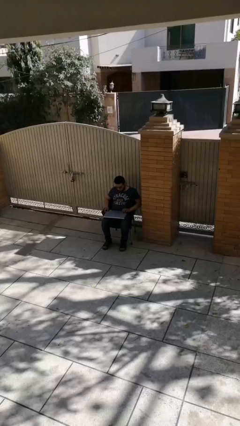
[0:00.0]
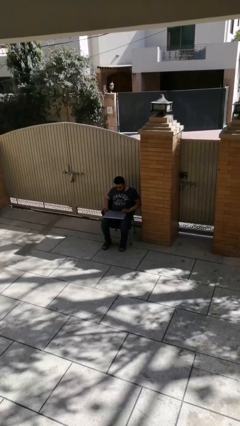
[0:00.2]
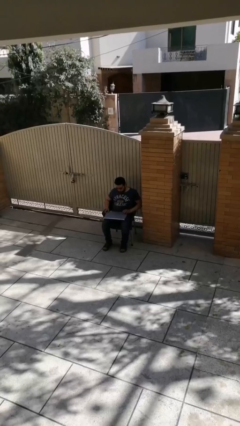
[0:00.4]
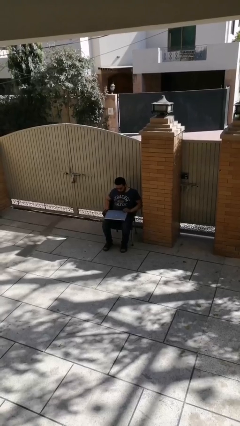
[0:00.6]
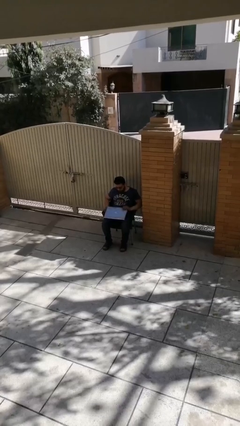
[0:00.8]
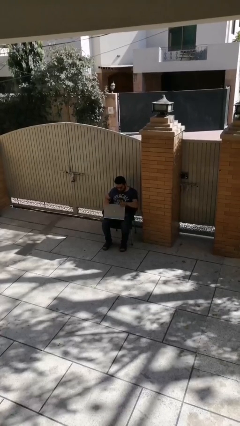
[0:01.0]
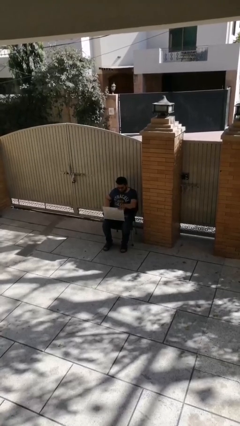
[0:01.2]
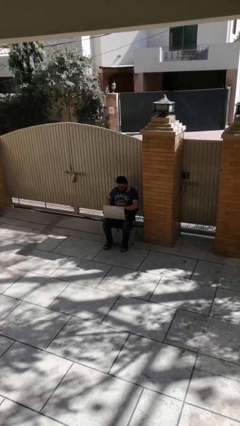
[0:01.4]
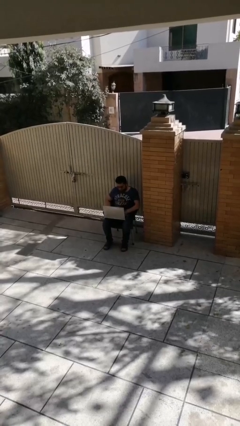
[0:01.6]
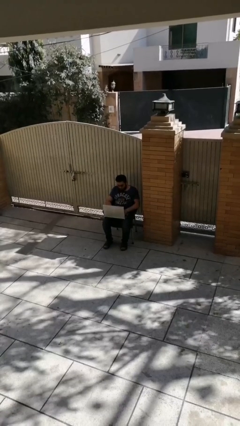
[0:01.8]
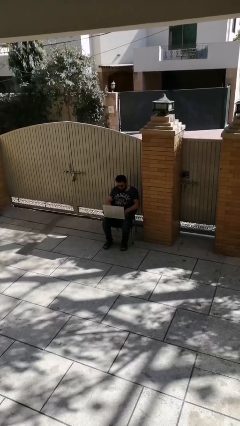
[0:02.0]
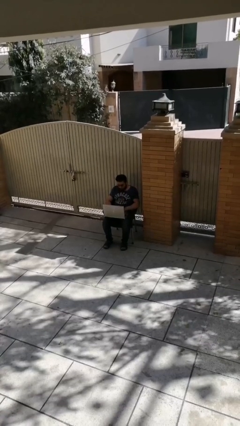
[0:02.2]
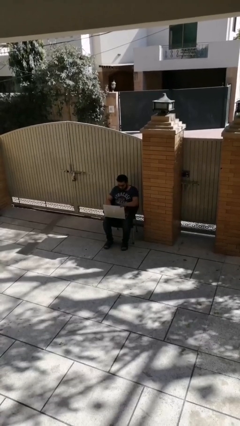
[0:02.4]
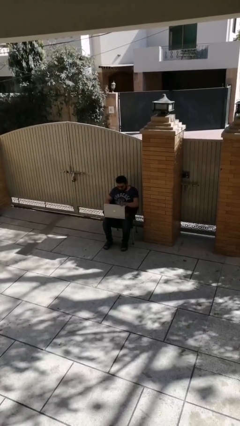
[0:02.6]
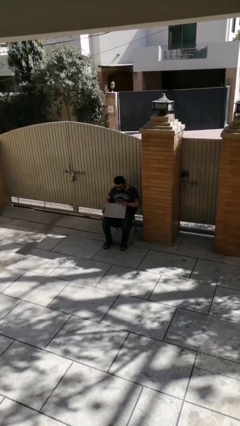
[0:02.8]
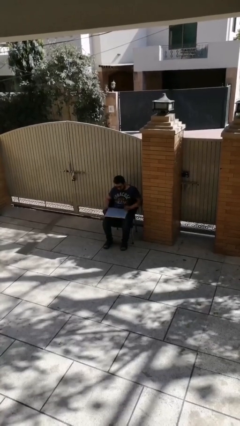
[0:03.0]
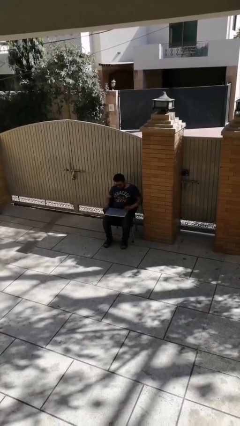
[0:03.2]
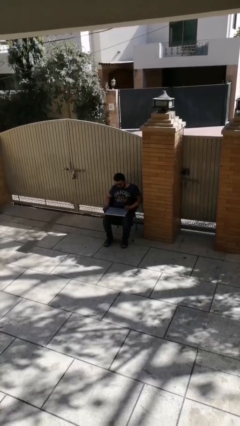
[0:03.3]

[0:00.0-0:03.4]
person interacts with laptop

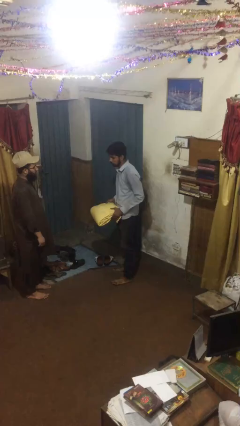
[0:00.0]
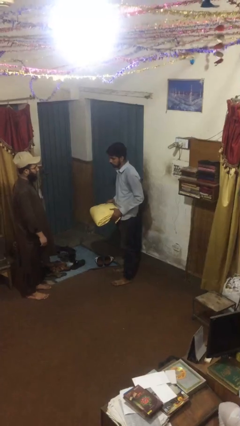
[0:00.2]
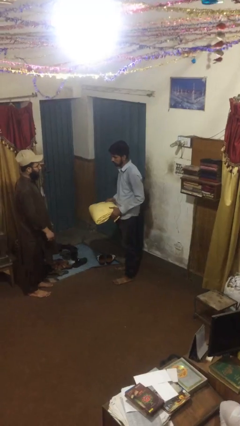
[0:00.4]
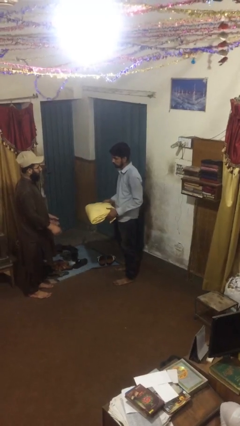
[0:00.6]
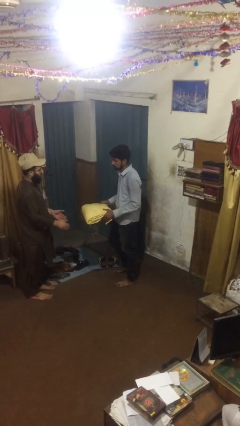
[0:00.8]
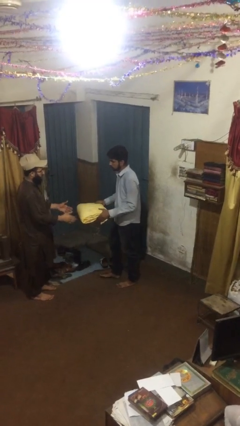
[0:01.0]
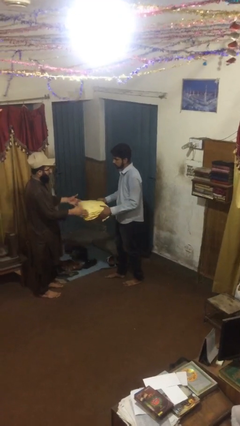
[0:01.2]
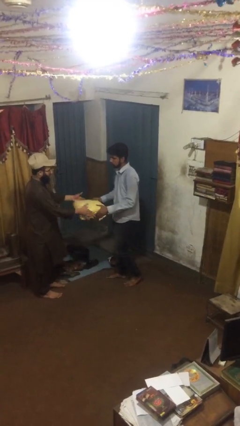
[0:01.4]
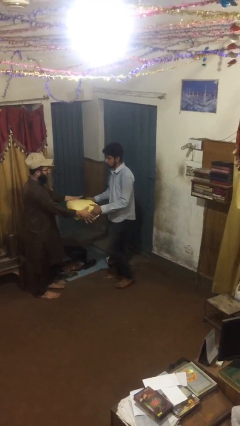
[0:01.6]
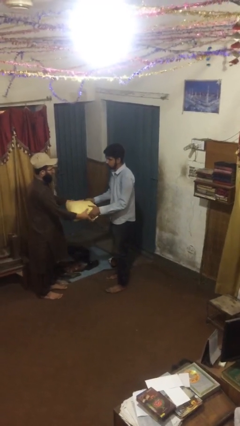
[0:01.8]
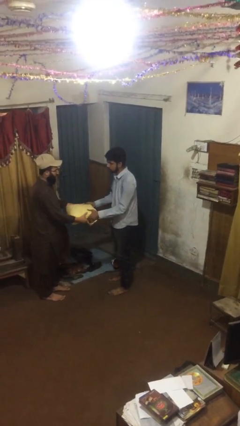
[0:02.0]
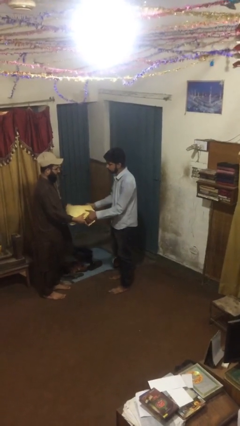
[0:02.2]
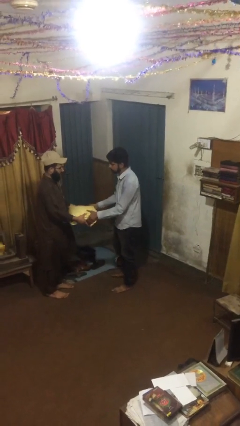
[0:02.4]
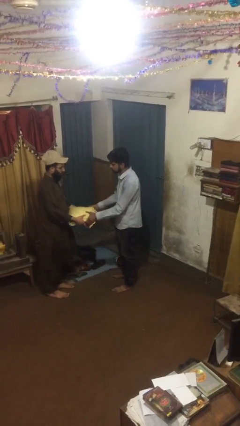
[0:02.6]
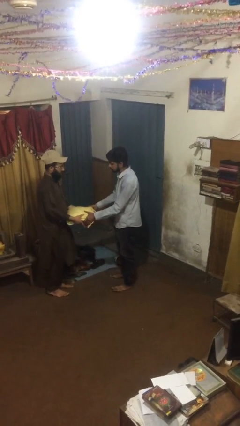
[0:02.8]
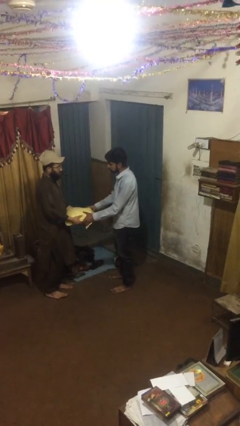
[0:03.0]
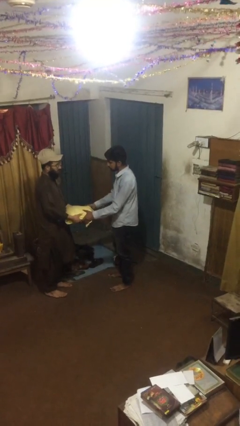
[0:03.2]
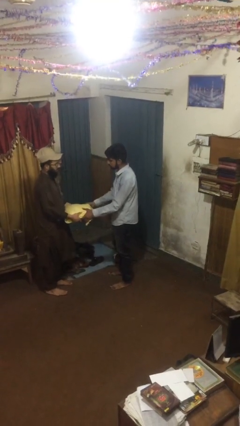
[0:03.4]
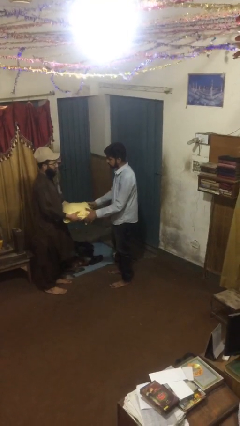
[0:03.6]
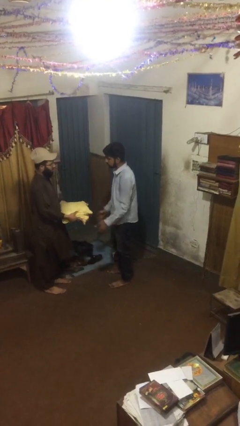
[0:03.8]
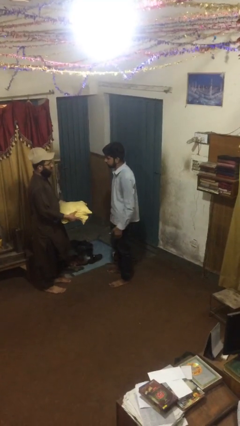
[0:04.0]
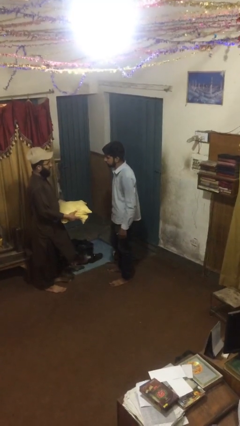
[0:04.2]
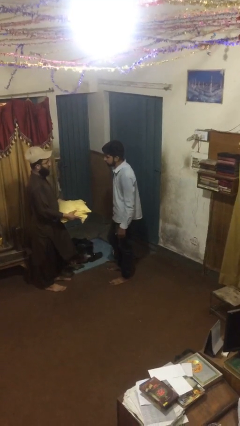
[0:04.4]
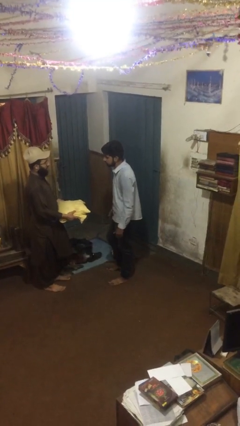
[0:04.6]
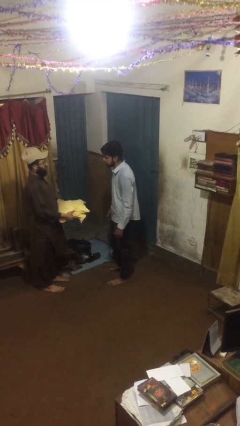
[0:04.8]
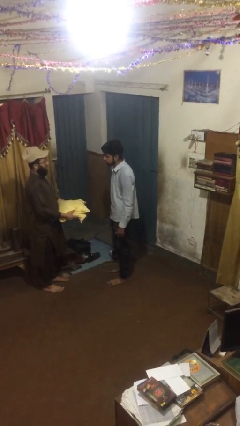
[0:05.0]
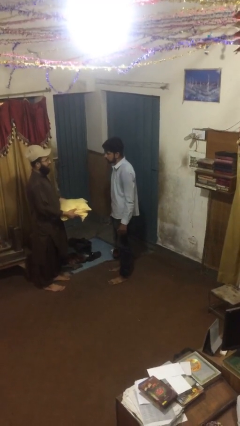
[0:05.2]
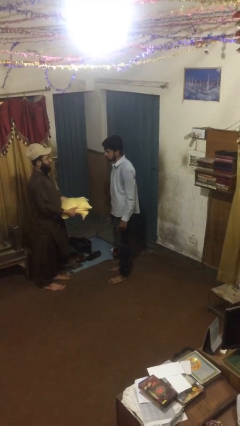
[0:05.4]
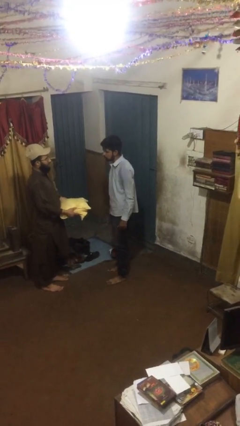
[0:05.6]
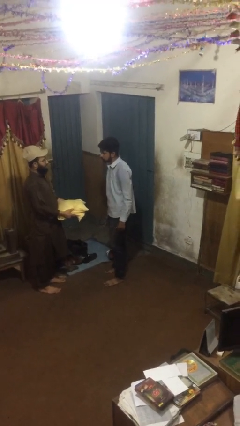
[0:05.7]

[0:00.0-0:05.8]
person transfers object to person

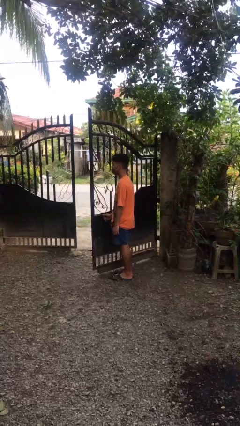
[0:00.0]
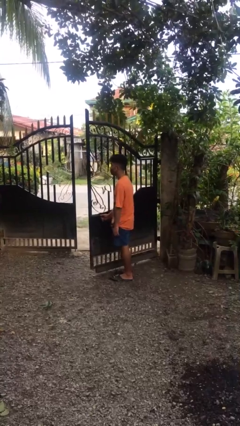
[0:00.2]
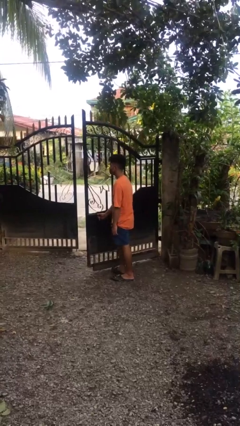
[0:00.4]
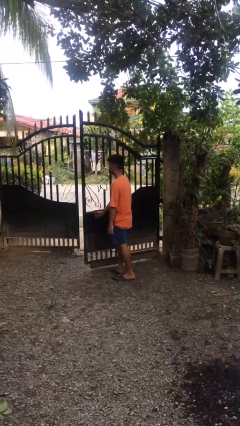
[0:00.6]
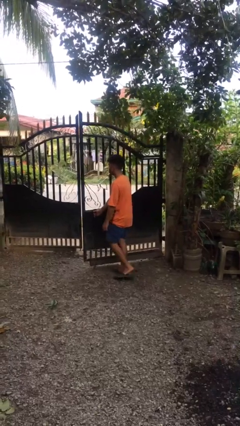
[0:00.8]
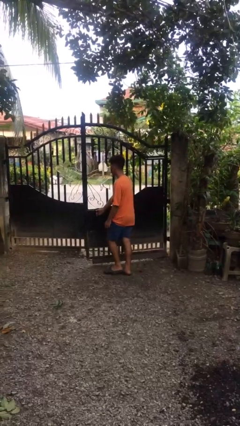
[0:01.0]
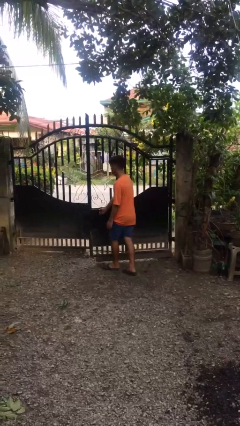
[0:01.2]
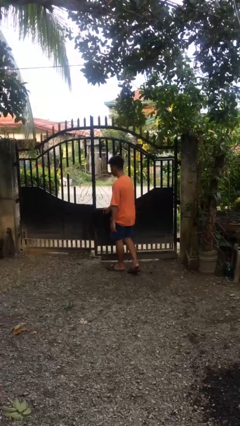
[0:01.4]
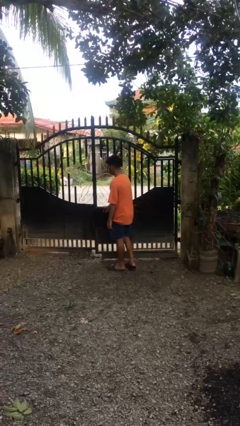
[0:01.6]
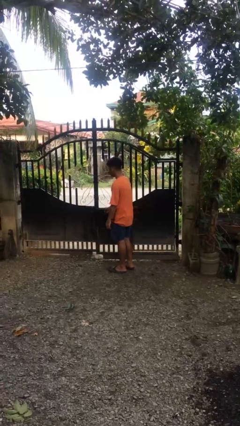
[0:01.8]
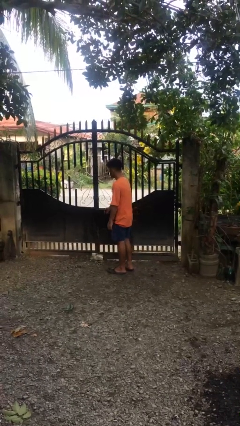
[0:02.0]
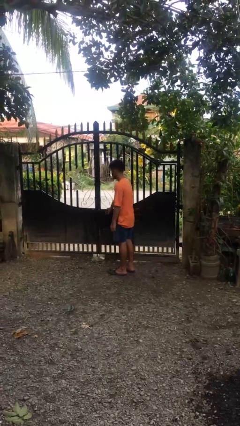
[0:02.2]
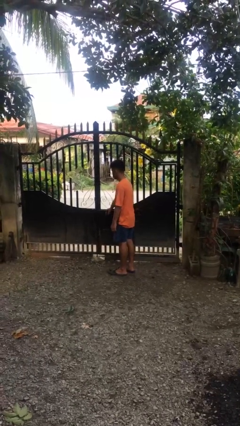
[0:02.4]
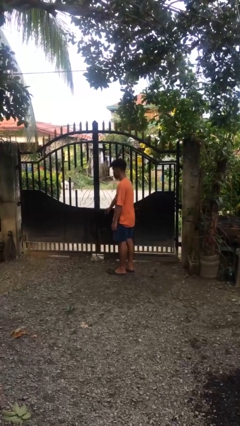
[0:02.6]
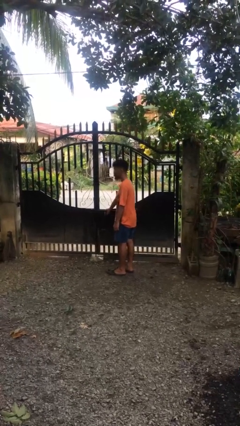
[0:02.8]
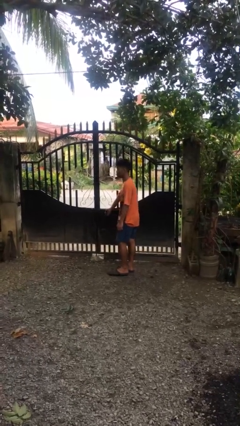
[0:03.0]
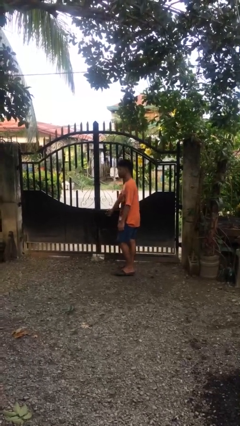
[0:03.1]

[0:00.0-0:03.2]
person closes gate

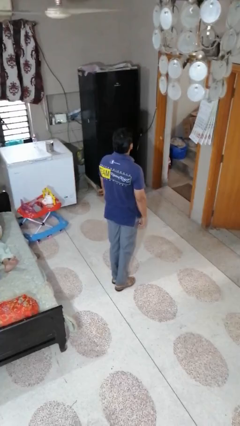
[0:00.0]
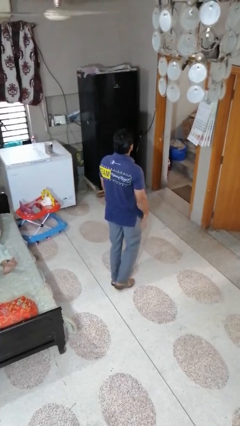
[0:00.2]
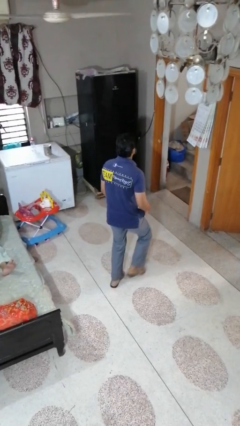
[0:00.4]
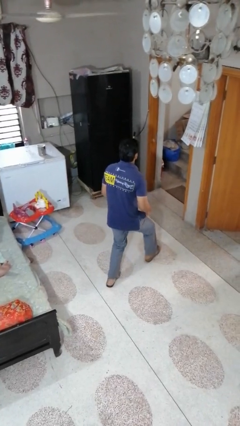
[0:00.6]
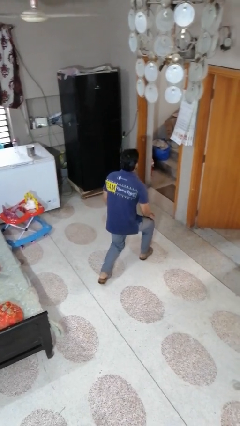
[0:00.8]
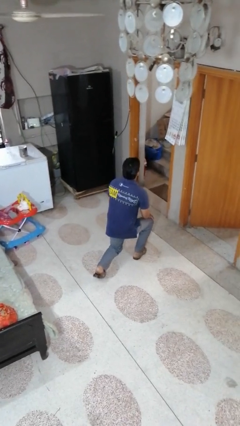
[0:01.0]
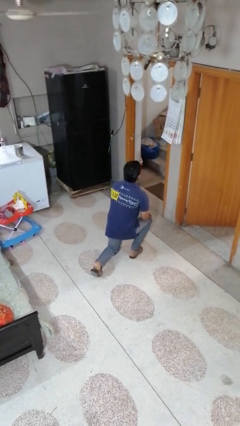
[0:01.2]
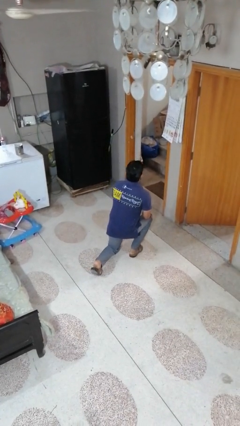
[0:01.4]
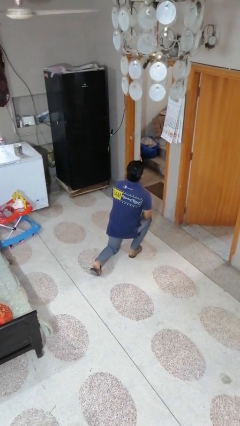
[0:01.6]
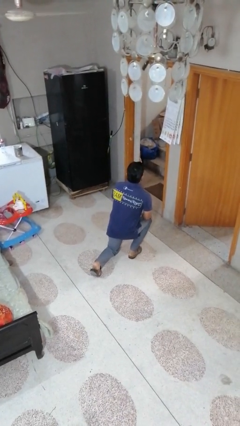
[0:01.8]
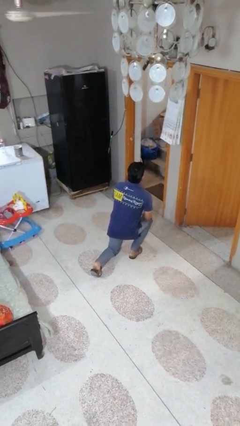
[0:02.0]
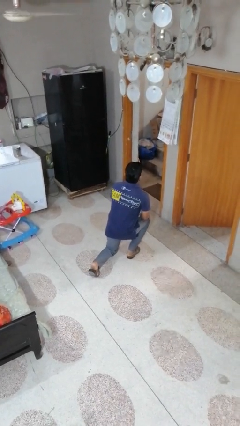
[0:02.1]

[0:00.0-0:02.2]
person kneels

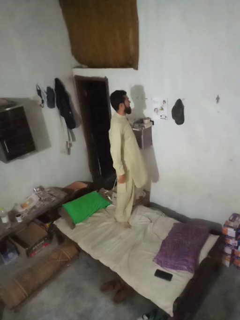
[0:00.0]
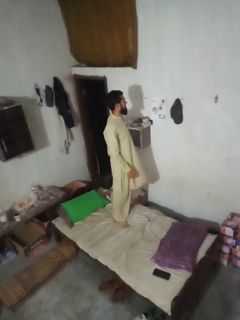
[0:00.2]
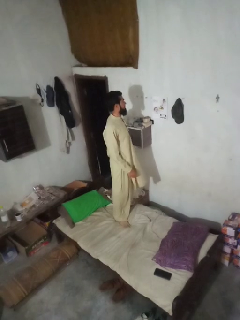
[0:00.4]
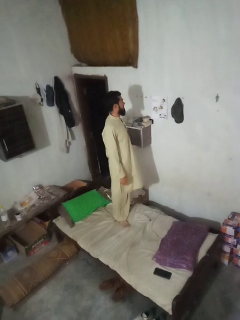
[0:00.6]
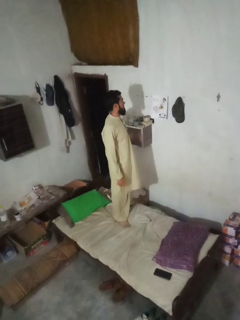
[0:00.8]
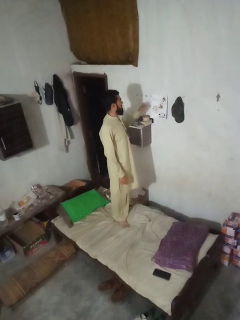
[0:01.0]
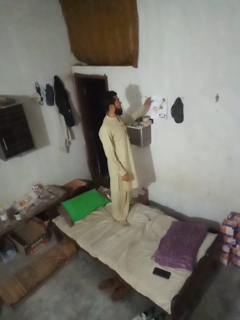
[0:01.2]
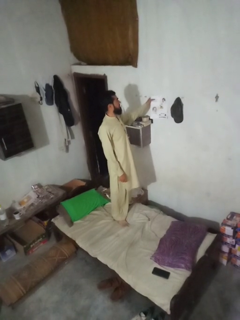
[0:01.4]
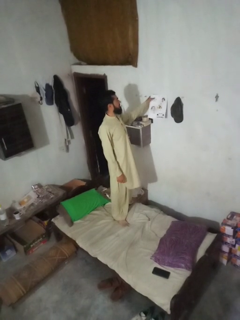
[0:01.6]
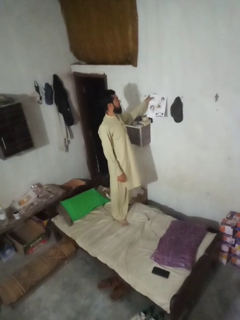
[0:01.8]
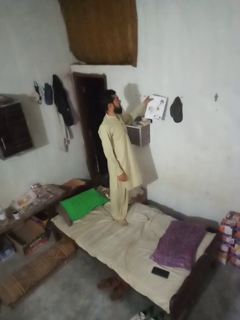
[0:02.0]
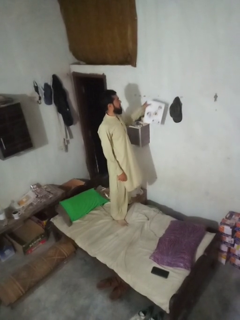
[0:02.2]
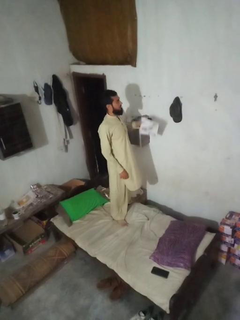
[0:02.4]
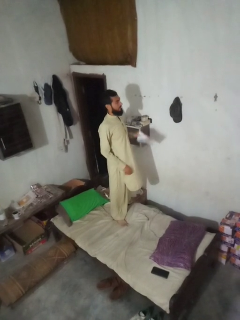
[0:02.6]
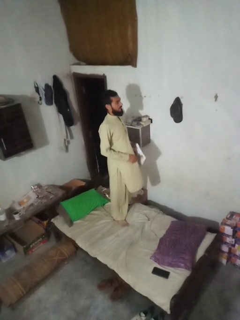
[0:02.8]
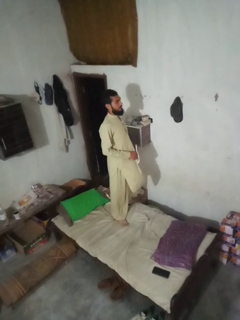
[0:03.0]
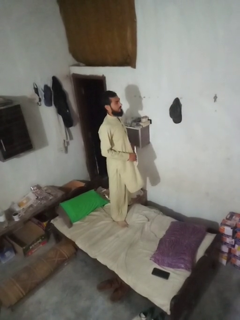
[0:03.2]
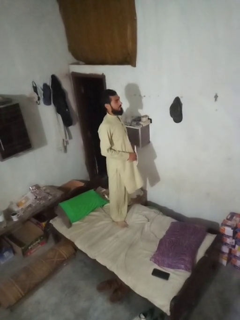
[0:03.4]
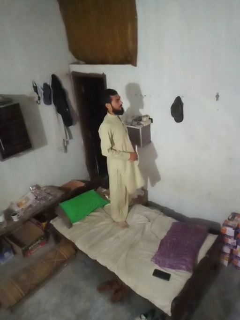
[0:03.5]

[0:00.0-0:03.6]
person takes down picture frame

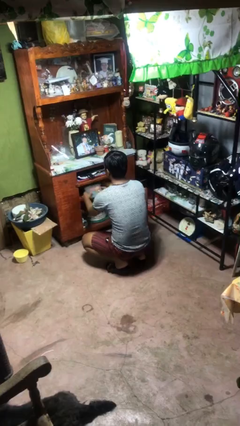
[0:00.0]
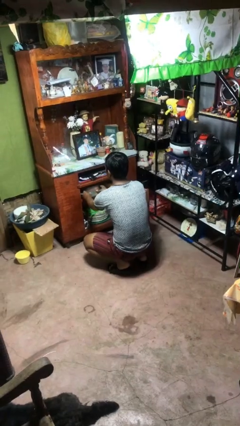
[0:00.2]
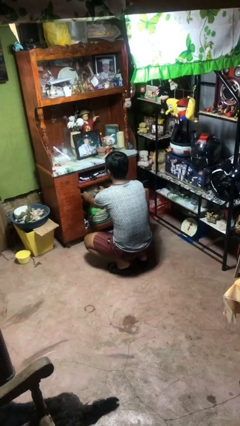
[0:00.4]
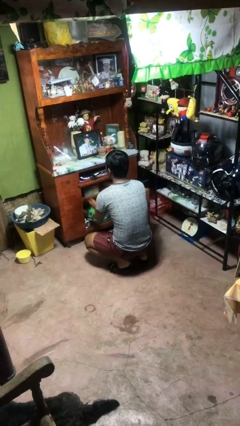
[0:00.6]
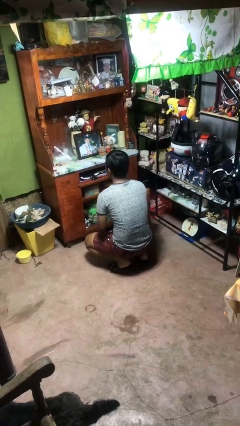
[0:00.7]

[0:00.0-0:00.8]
person puts down object into cabinet
